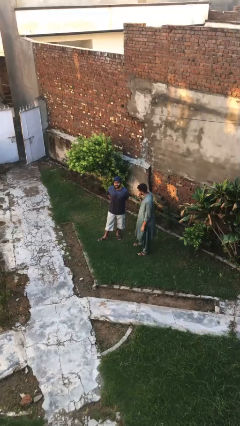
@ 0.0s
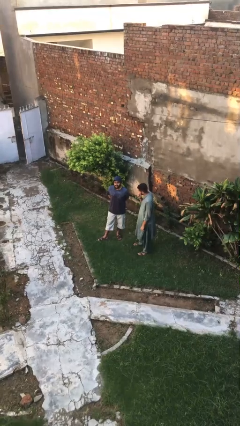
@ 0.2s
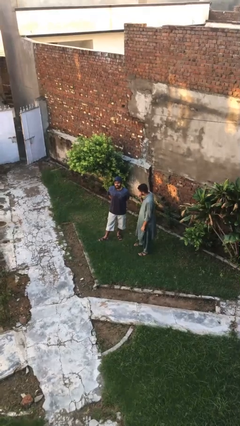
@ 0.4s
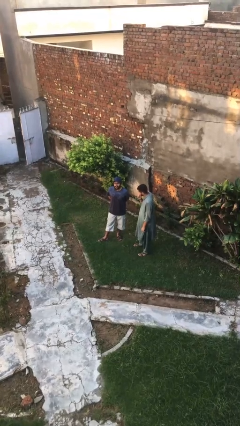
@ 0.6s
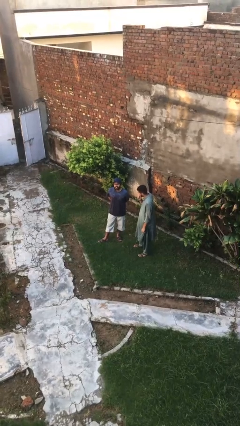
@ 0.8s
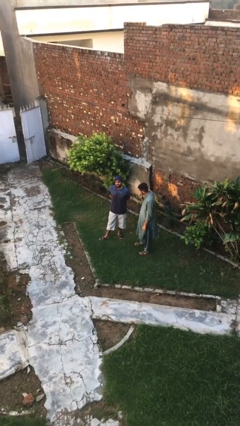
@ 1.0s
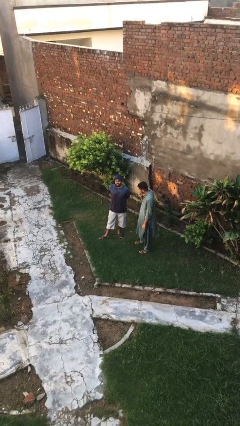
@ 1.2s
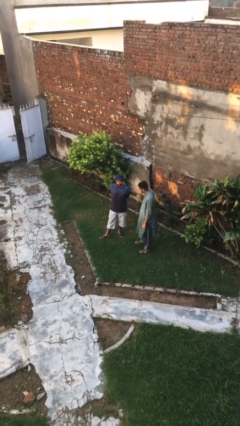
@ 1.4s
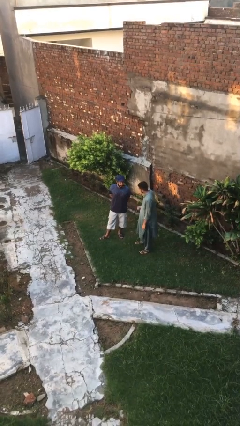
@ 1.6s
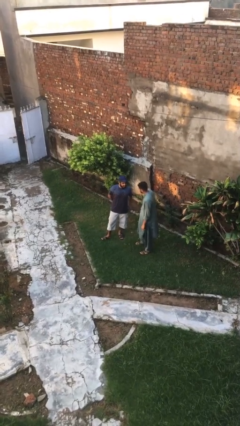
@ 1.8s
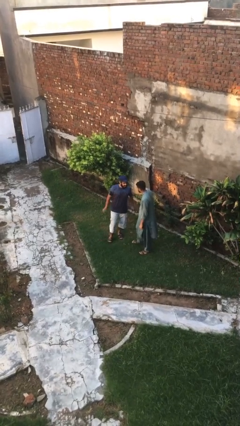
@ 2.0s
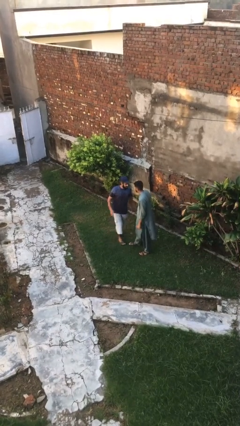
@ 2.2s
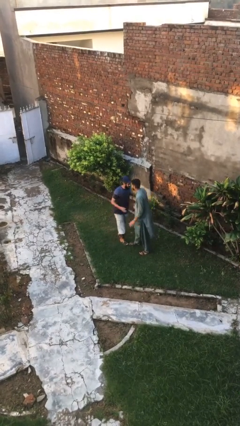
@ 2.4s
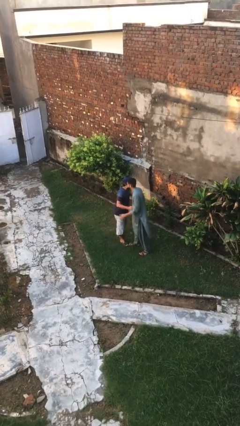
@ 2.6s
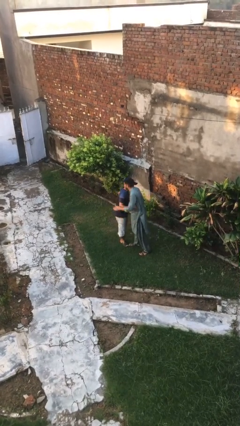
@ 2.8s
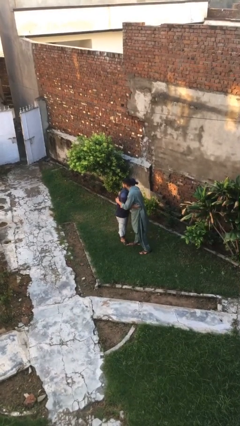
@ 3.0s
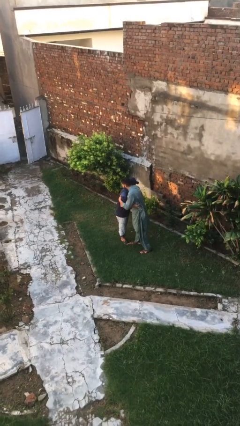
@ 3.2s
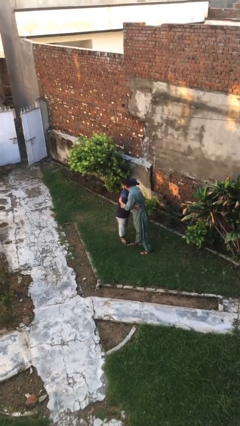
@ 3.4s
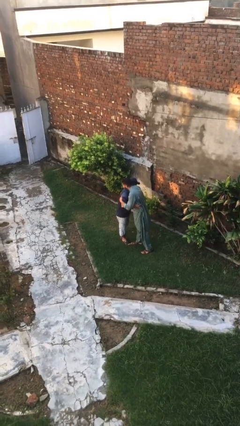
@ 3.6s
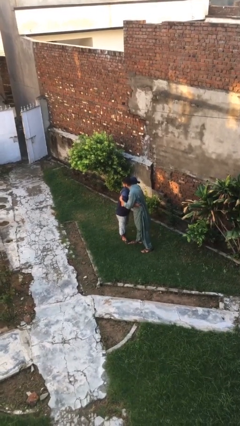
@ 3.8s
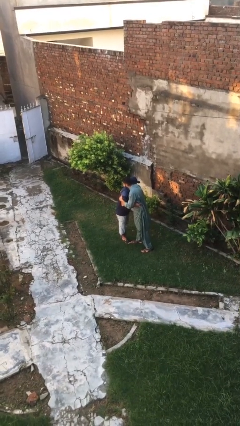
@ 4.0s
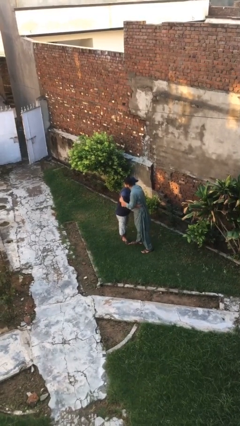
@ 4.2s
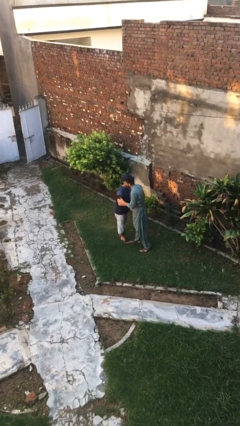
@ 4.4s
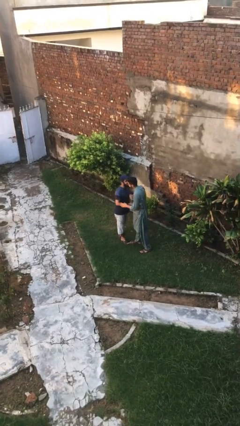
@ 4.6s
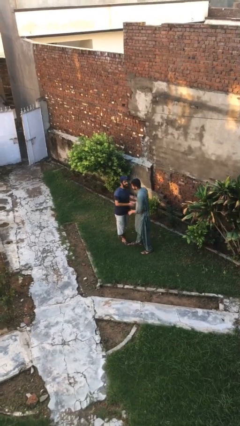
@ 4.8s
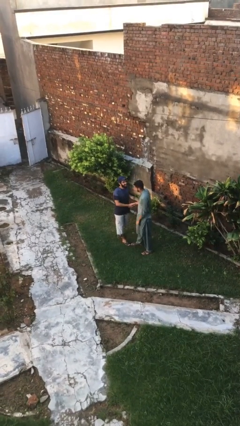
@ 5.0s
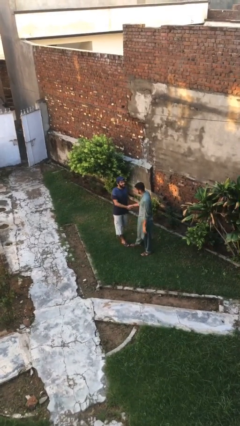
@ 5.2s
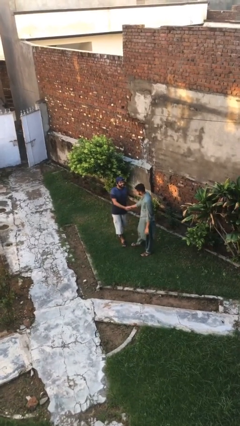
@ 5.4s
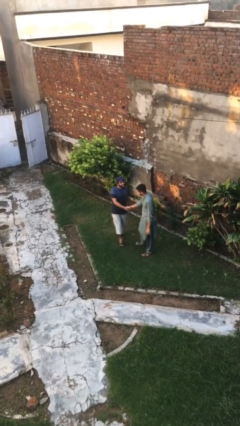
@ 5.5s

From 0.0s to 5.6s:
person embraces person

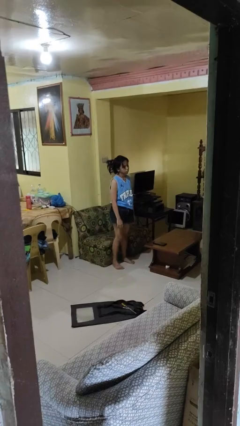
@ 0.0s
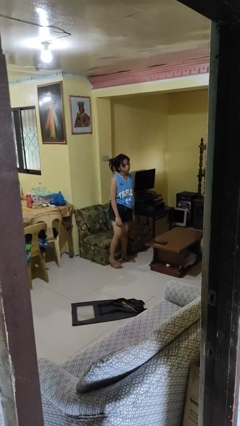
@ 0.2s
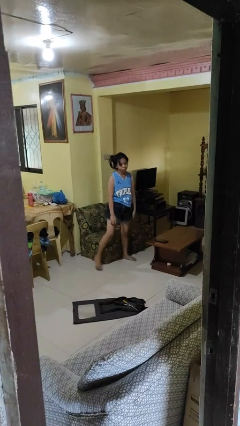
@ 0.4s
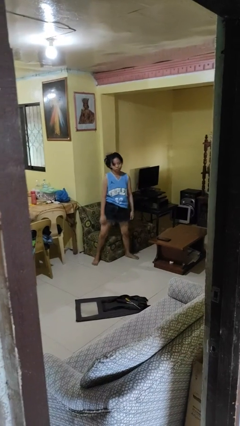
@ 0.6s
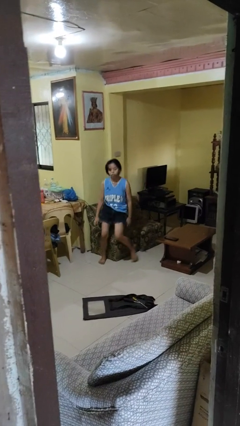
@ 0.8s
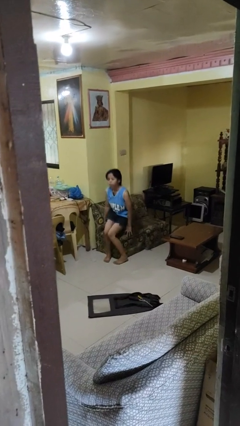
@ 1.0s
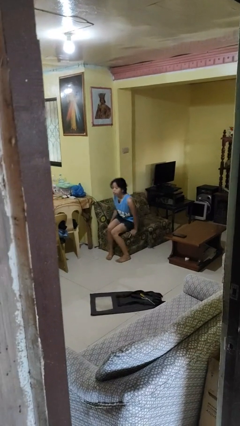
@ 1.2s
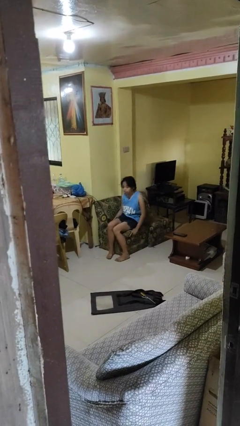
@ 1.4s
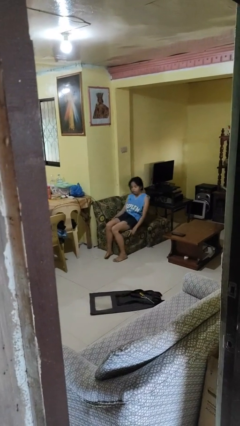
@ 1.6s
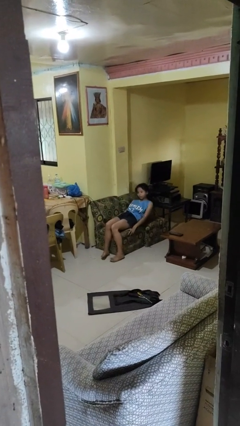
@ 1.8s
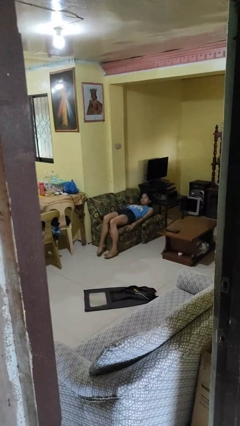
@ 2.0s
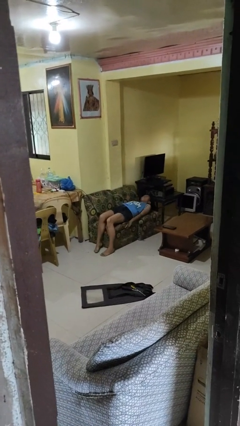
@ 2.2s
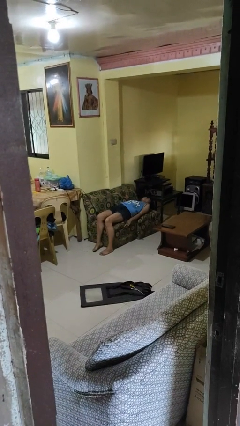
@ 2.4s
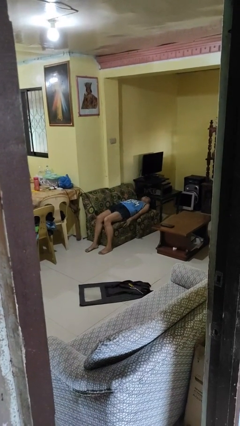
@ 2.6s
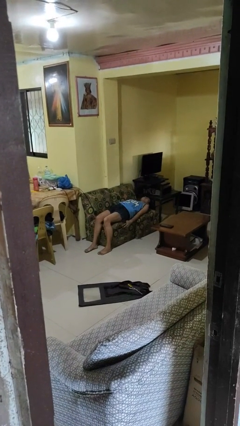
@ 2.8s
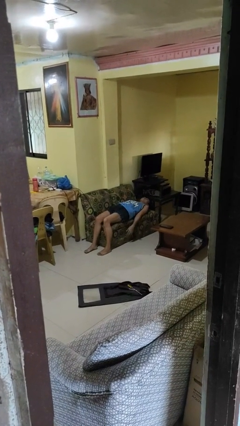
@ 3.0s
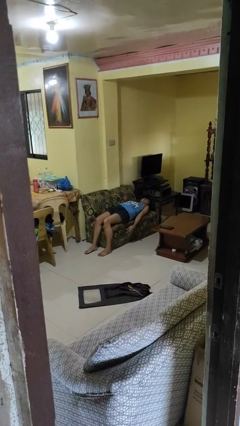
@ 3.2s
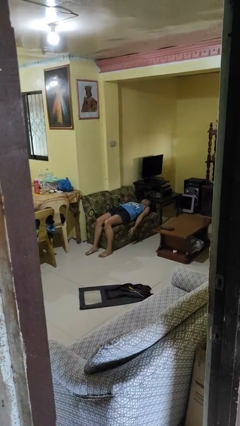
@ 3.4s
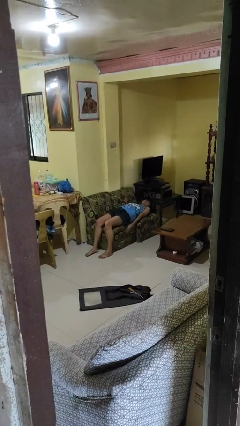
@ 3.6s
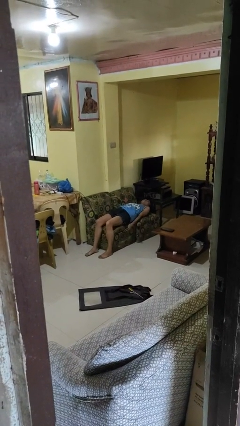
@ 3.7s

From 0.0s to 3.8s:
person lies down on couch

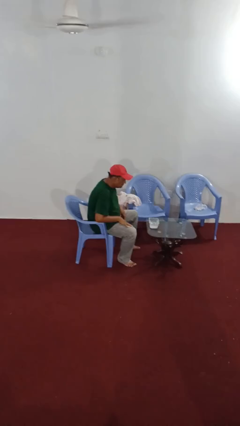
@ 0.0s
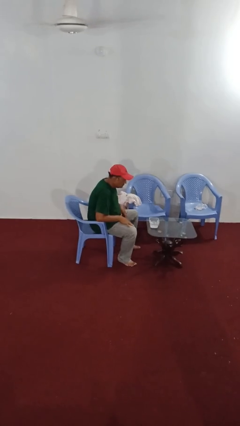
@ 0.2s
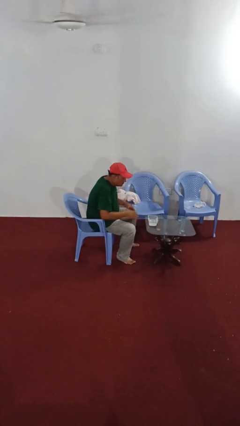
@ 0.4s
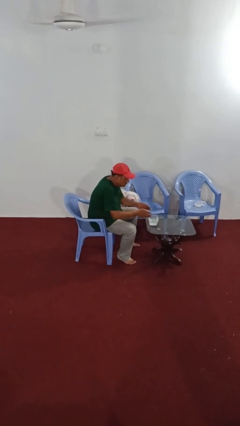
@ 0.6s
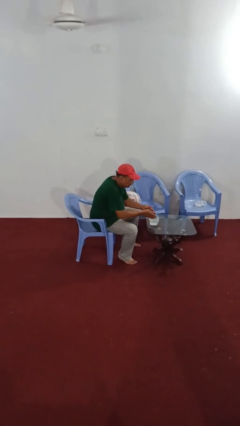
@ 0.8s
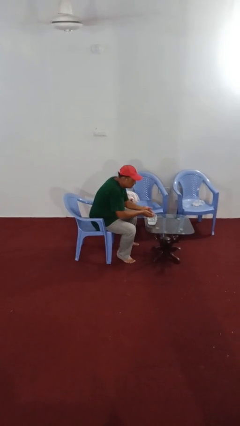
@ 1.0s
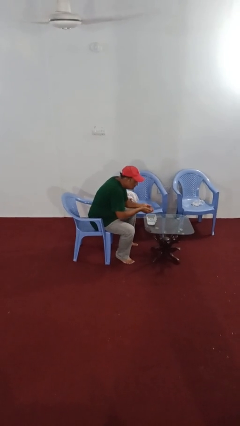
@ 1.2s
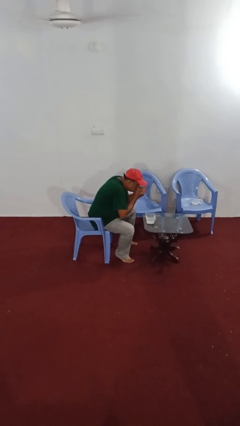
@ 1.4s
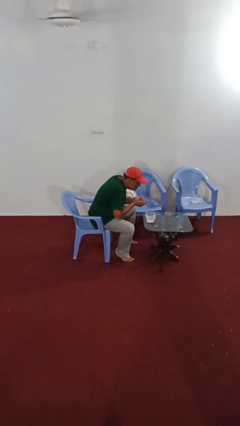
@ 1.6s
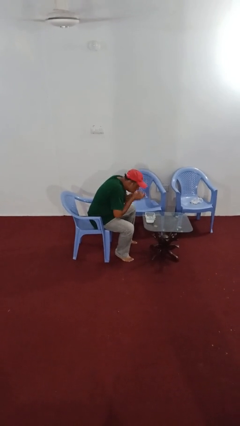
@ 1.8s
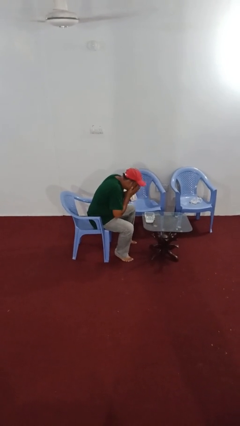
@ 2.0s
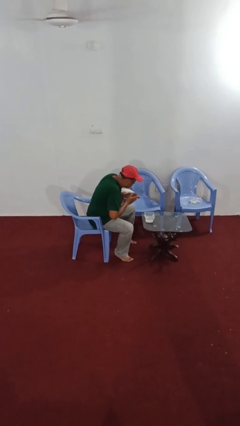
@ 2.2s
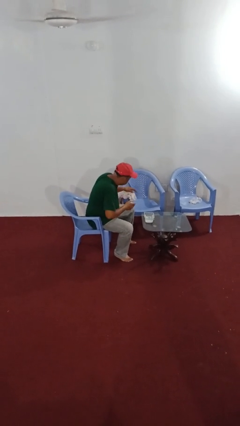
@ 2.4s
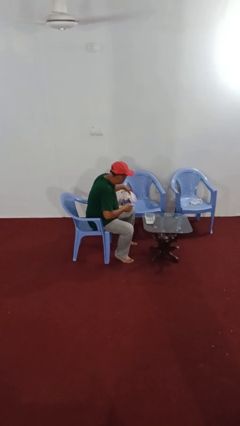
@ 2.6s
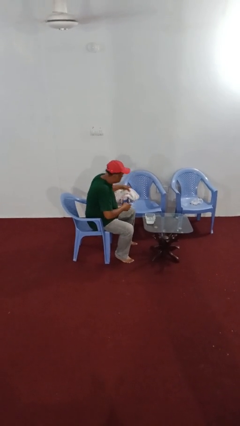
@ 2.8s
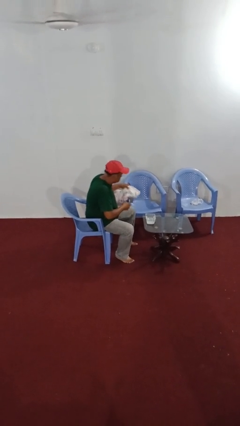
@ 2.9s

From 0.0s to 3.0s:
person washes face

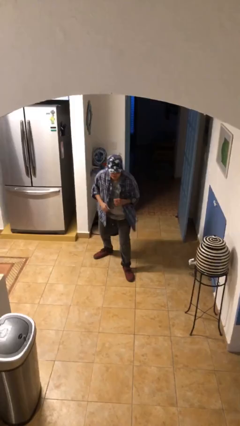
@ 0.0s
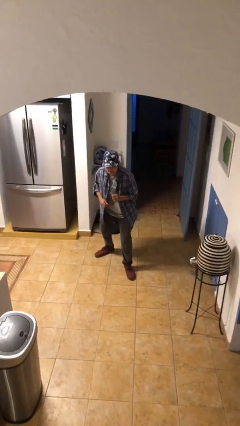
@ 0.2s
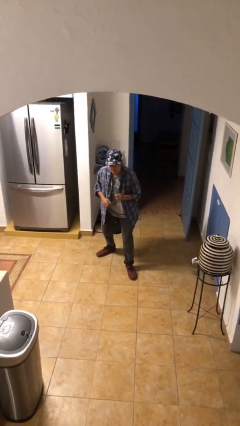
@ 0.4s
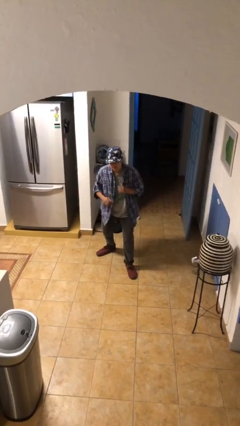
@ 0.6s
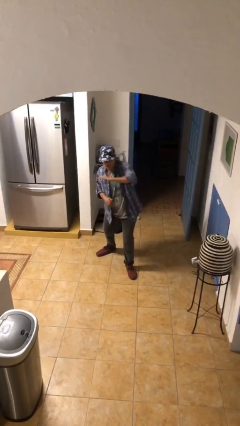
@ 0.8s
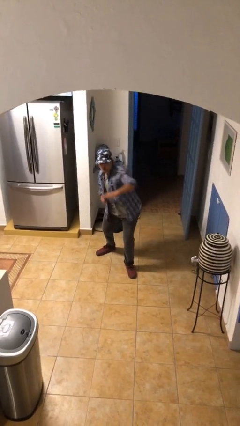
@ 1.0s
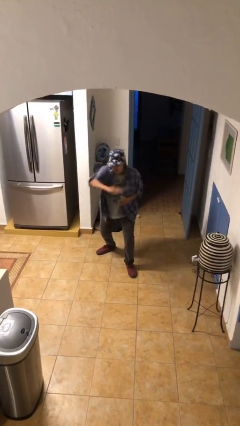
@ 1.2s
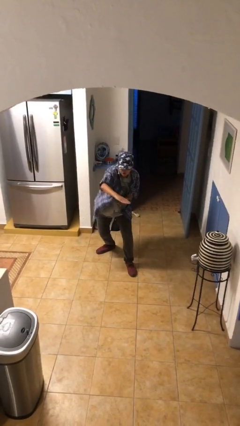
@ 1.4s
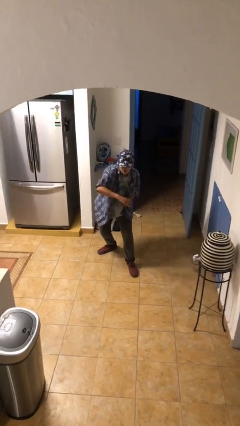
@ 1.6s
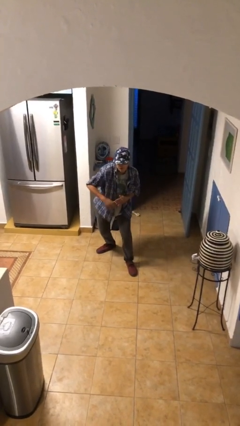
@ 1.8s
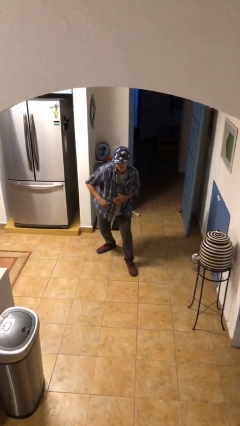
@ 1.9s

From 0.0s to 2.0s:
person karate chop

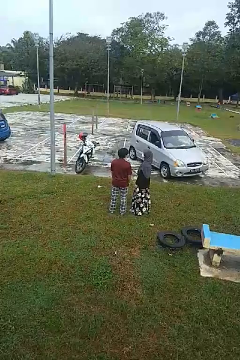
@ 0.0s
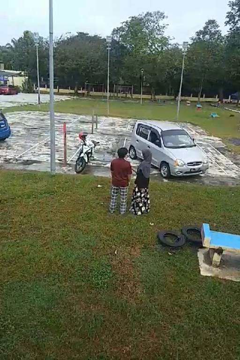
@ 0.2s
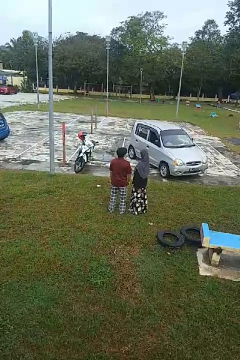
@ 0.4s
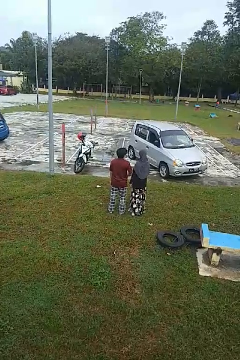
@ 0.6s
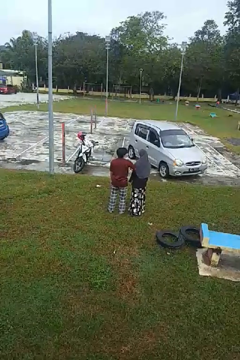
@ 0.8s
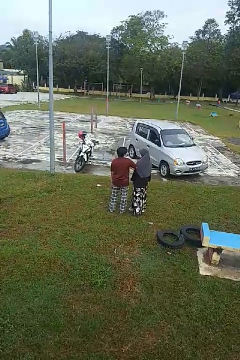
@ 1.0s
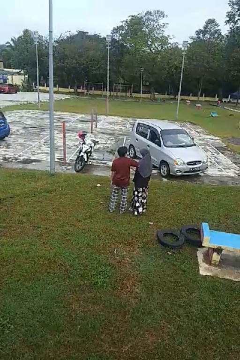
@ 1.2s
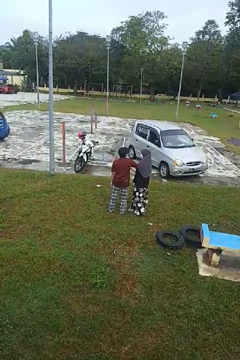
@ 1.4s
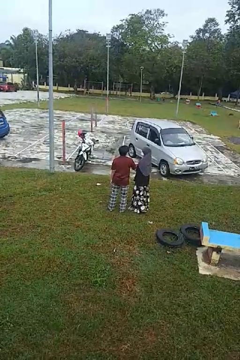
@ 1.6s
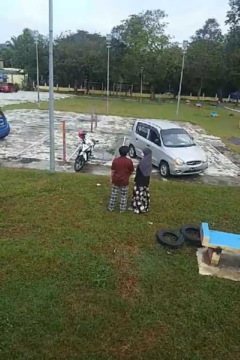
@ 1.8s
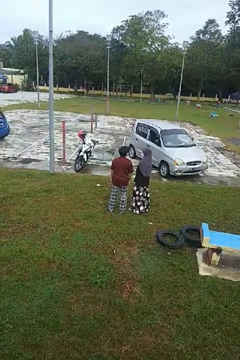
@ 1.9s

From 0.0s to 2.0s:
person nudges person with elbow

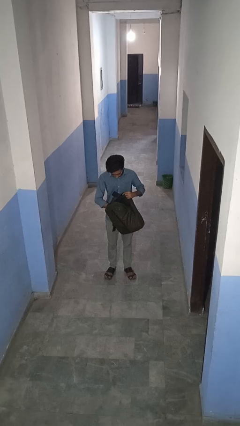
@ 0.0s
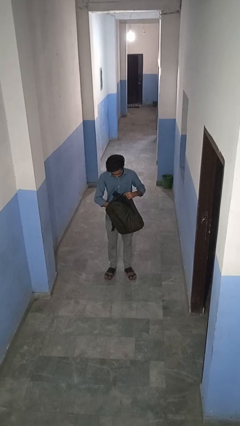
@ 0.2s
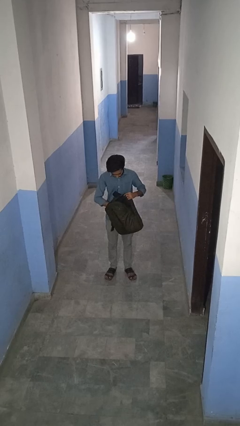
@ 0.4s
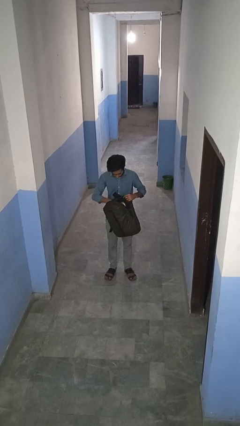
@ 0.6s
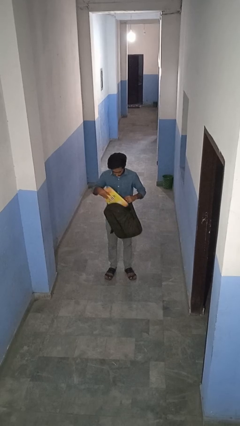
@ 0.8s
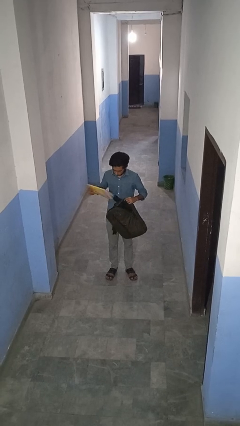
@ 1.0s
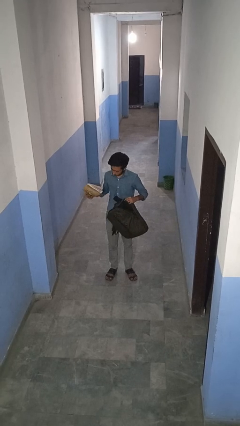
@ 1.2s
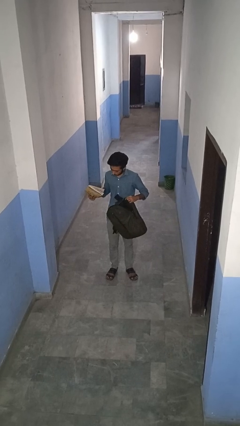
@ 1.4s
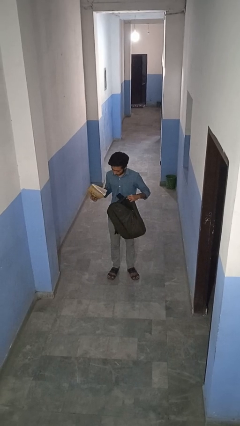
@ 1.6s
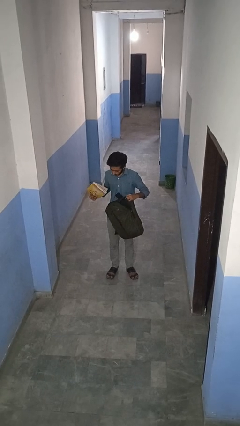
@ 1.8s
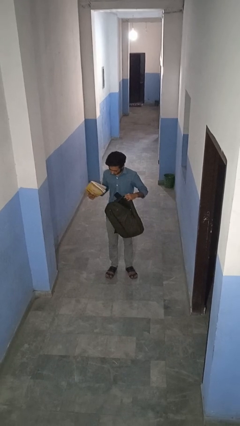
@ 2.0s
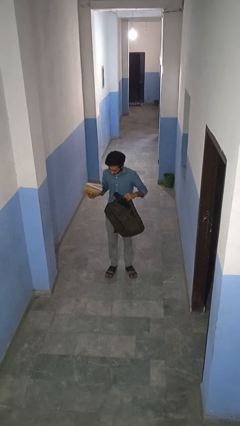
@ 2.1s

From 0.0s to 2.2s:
person takes object from backpack
